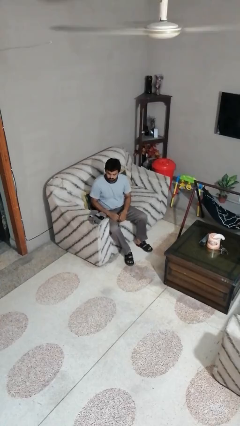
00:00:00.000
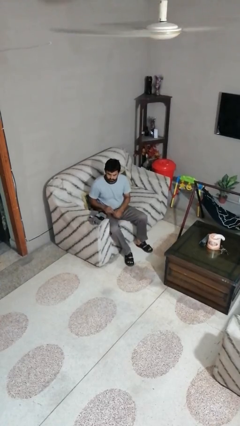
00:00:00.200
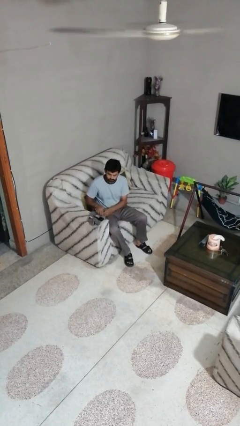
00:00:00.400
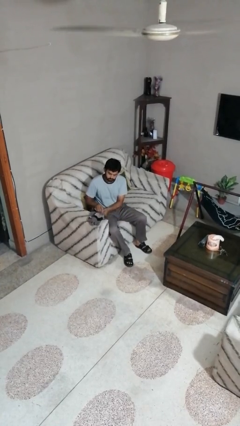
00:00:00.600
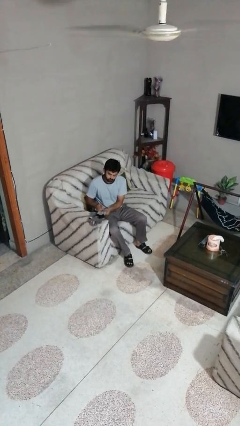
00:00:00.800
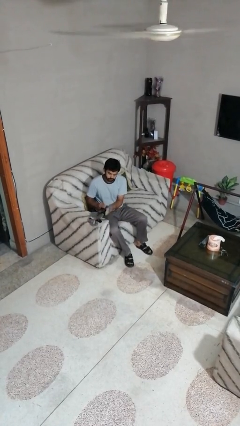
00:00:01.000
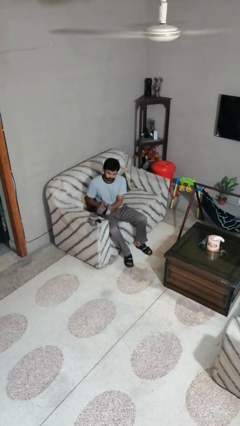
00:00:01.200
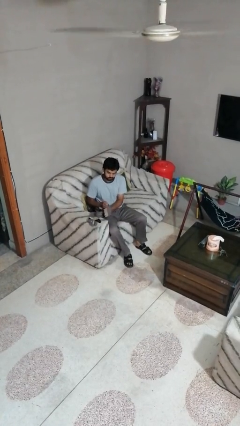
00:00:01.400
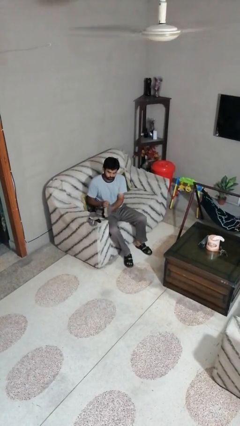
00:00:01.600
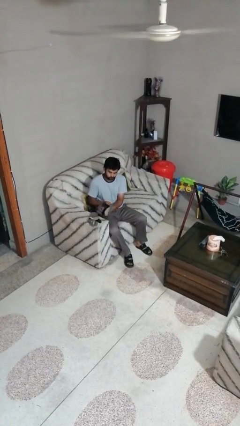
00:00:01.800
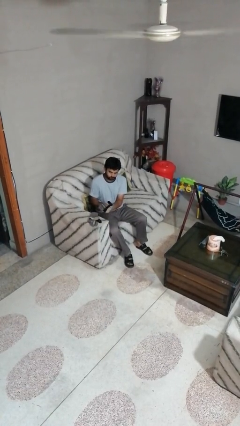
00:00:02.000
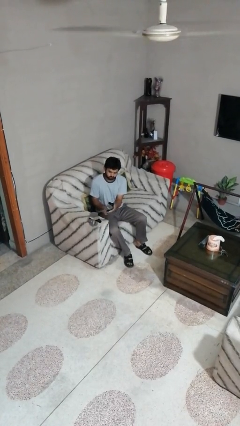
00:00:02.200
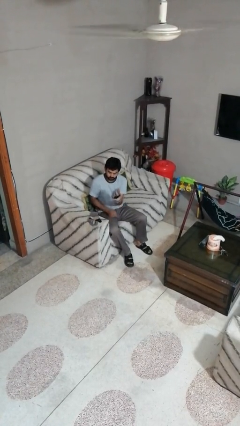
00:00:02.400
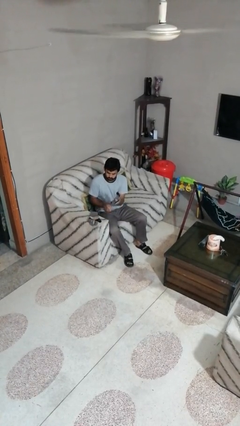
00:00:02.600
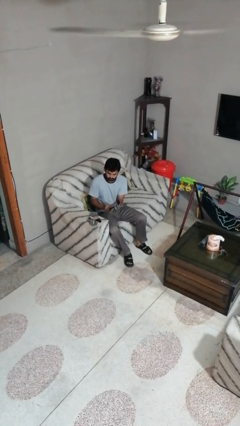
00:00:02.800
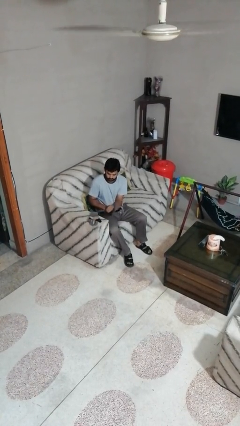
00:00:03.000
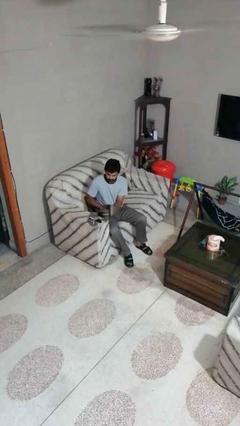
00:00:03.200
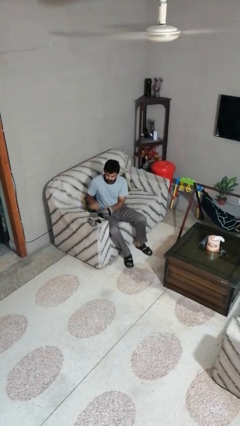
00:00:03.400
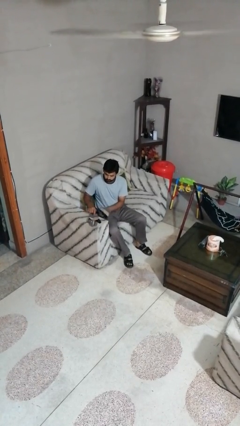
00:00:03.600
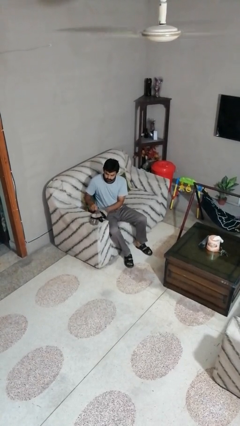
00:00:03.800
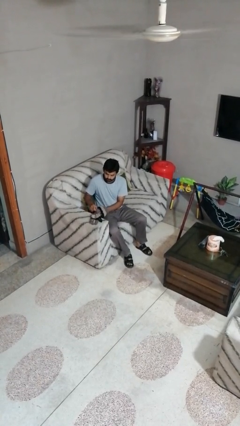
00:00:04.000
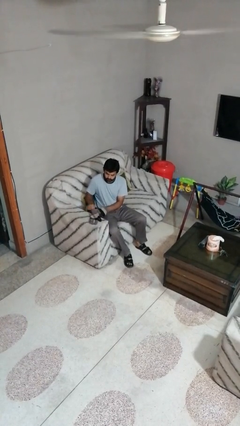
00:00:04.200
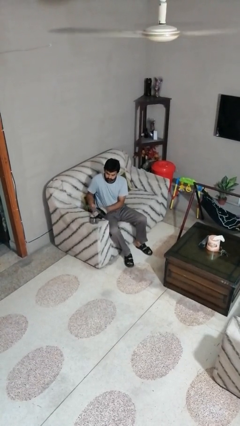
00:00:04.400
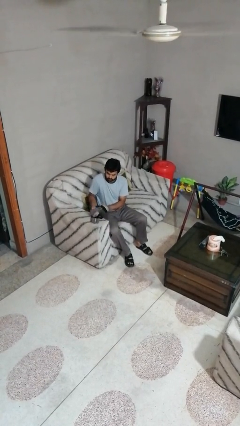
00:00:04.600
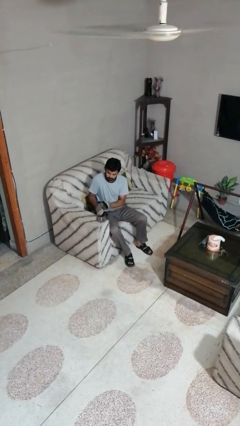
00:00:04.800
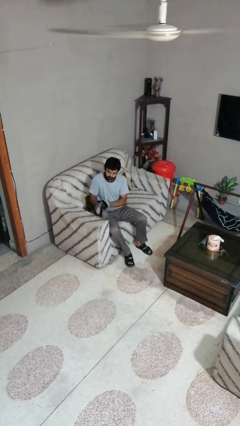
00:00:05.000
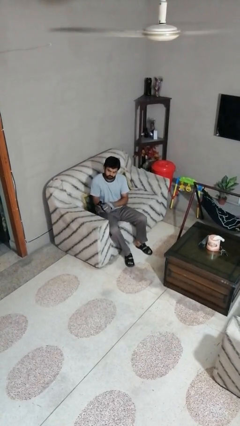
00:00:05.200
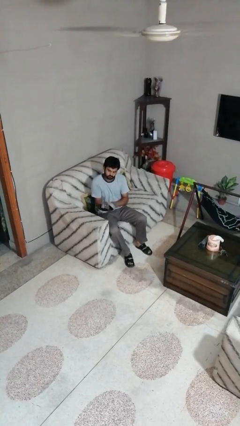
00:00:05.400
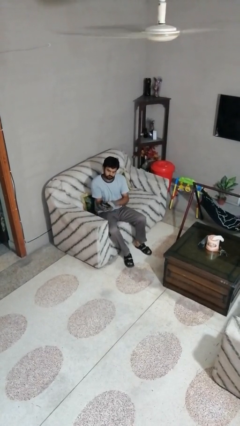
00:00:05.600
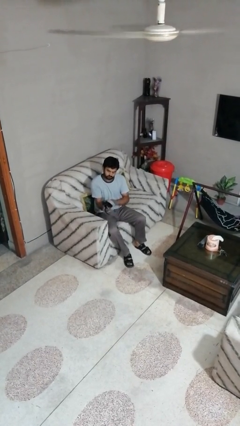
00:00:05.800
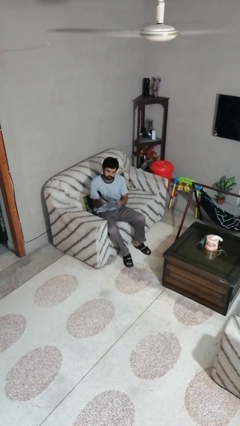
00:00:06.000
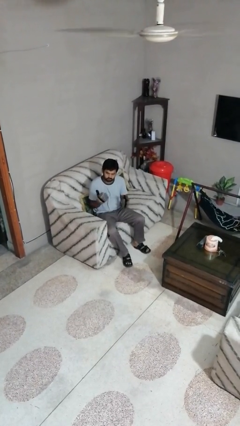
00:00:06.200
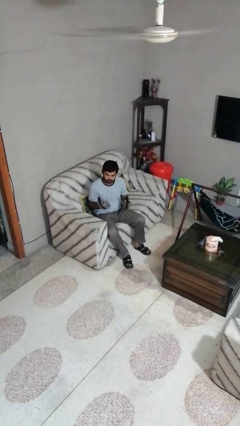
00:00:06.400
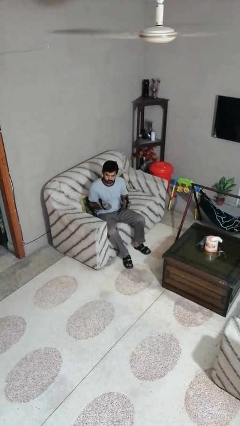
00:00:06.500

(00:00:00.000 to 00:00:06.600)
person puts on gloves

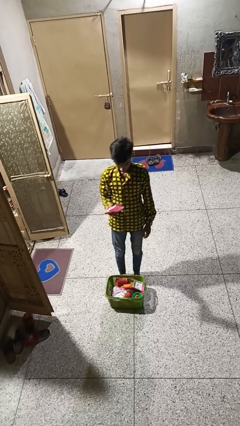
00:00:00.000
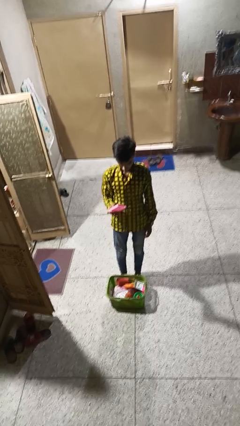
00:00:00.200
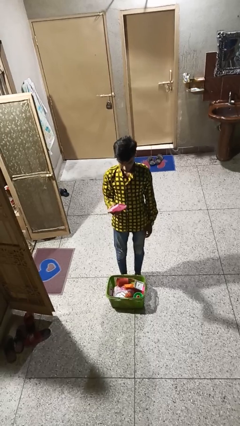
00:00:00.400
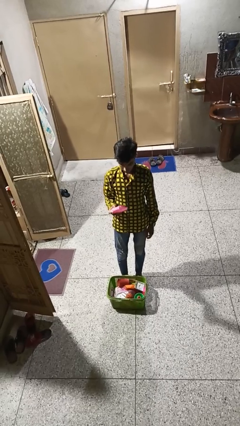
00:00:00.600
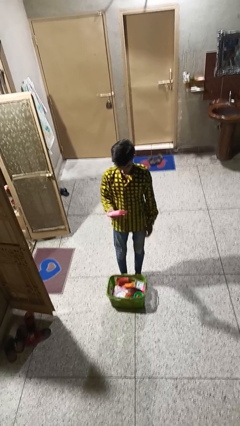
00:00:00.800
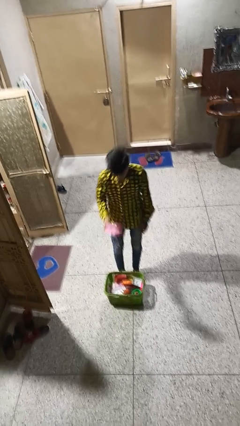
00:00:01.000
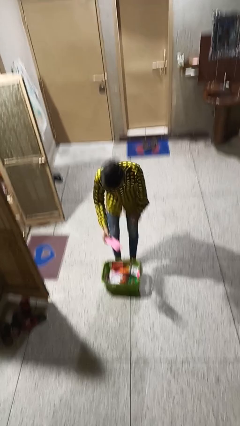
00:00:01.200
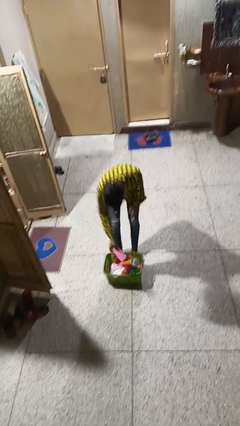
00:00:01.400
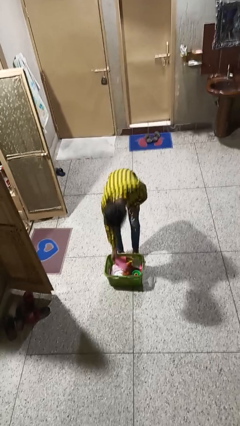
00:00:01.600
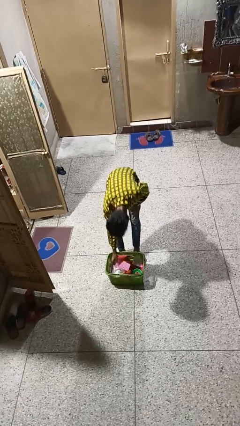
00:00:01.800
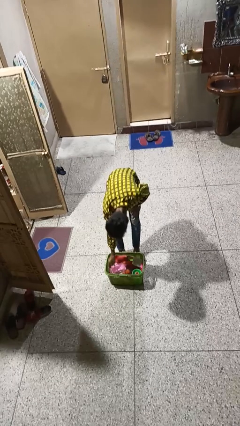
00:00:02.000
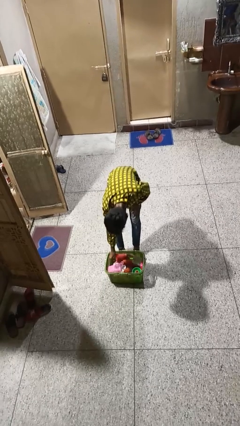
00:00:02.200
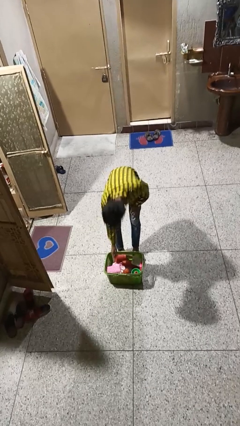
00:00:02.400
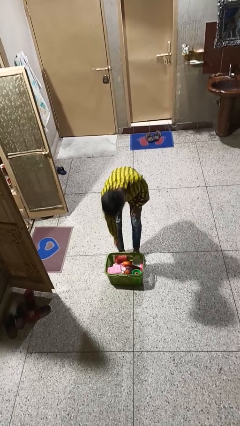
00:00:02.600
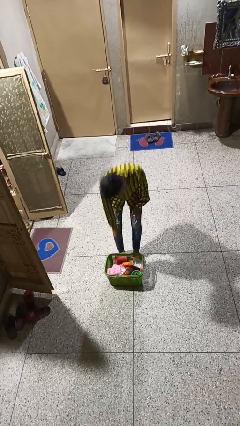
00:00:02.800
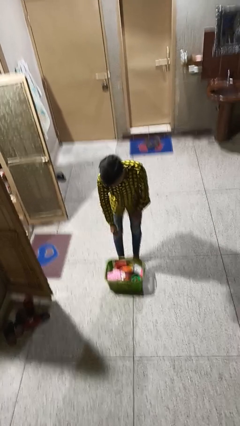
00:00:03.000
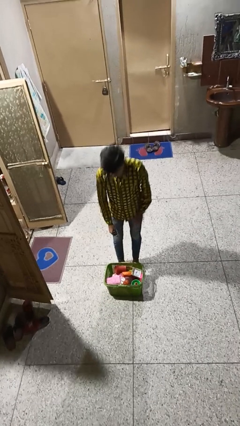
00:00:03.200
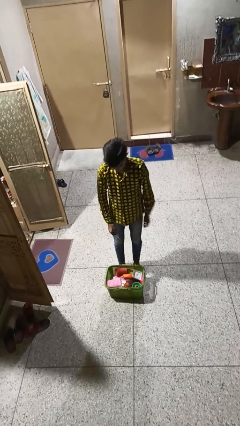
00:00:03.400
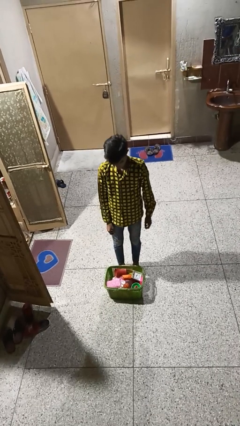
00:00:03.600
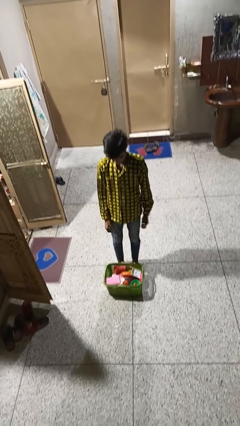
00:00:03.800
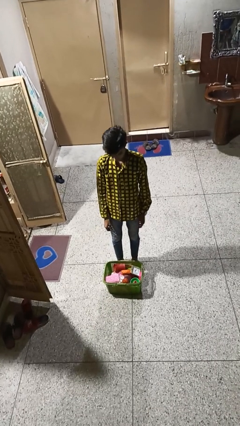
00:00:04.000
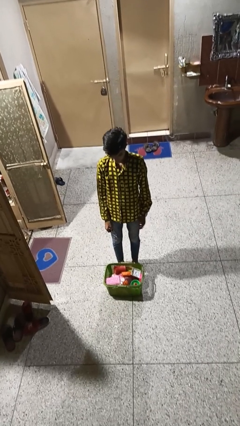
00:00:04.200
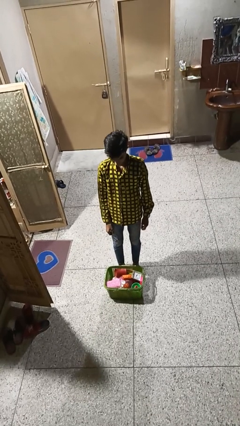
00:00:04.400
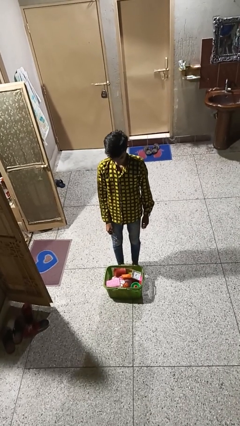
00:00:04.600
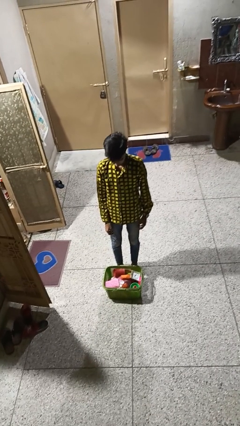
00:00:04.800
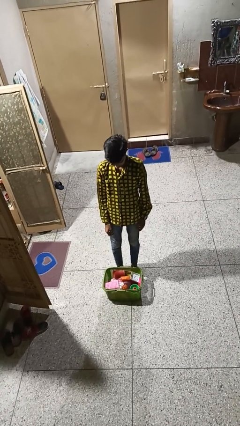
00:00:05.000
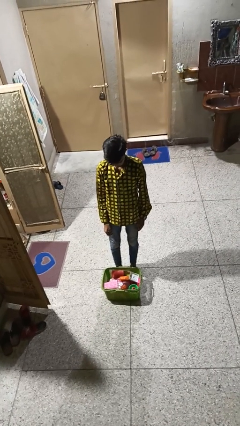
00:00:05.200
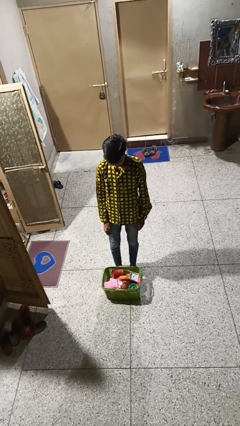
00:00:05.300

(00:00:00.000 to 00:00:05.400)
person takes object from basket

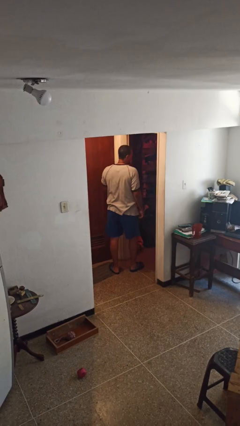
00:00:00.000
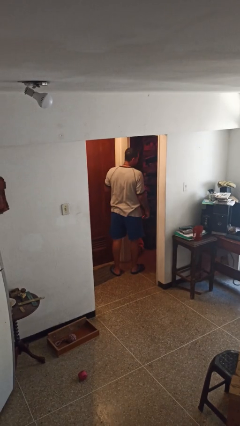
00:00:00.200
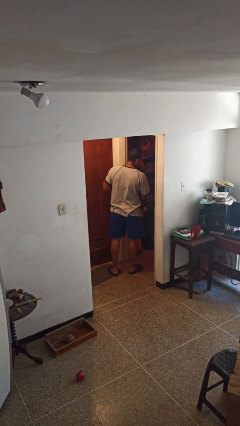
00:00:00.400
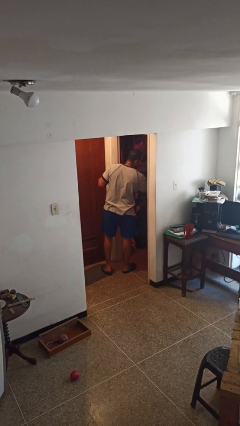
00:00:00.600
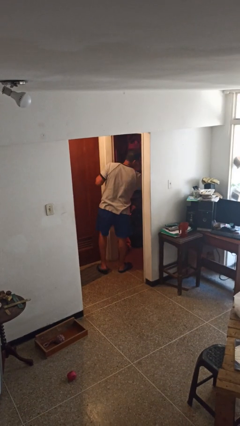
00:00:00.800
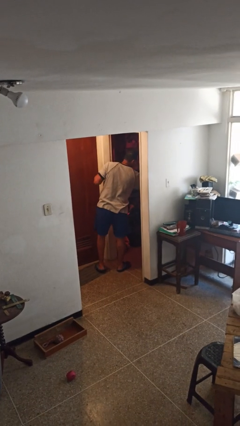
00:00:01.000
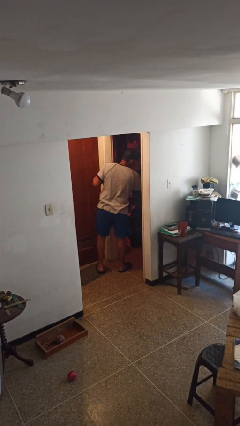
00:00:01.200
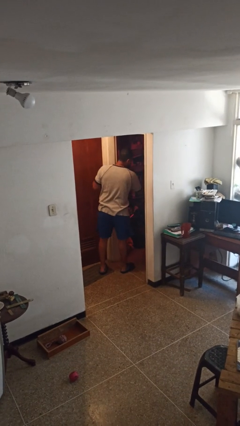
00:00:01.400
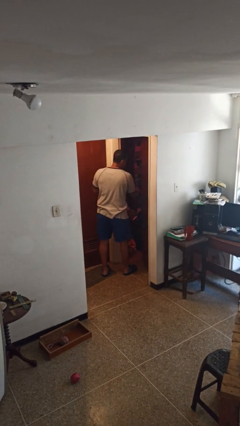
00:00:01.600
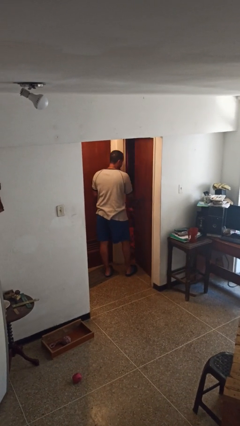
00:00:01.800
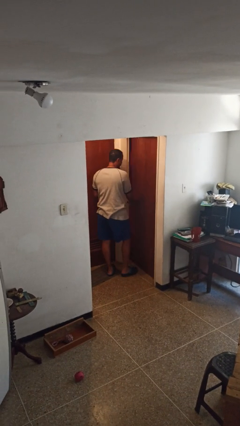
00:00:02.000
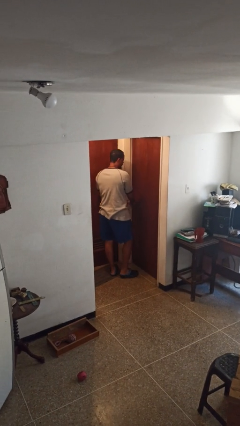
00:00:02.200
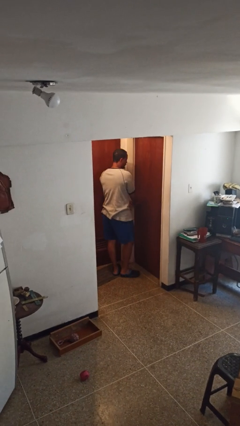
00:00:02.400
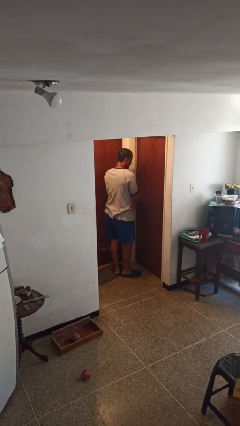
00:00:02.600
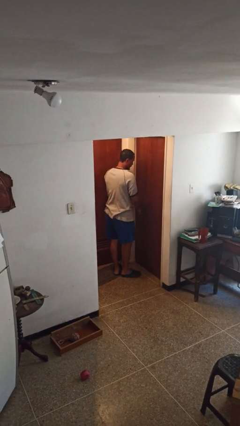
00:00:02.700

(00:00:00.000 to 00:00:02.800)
person closes facility door

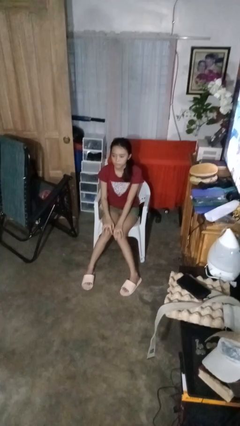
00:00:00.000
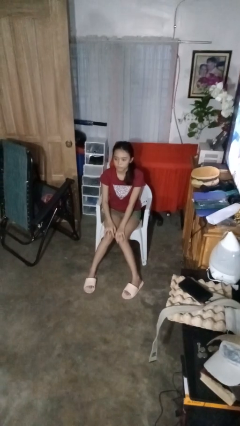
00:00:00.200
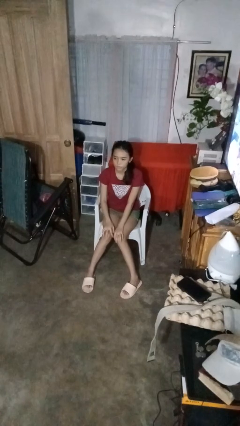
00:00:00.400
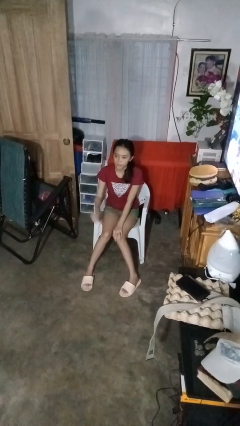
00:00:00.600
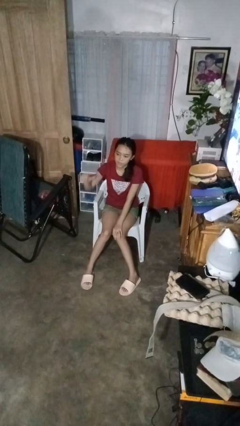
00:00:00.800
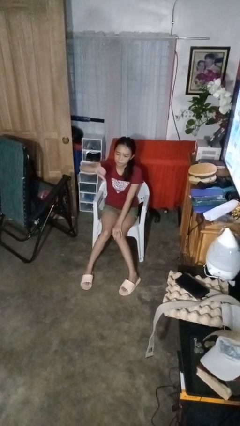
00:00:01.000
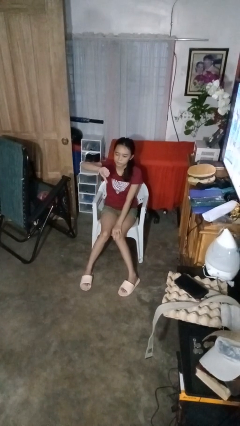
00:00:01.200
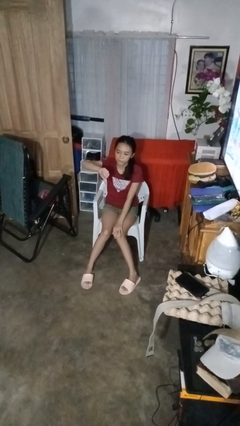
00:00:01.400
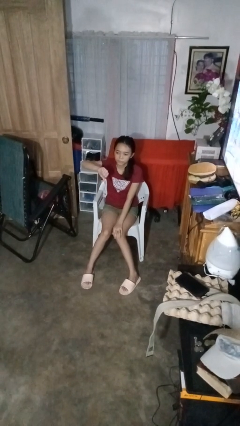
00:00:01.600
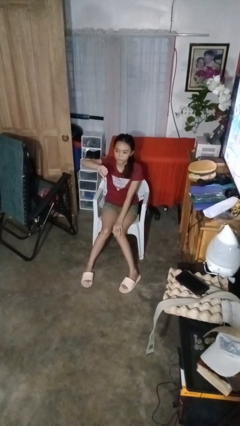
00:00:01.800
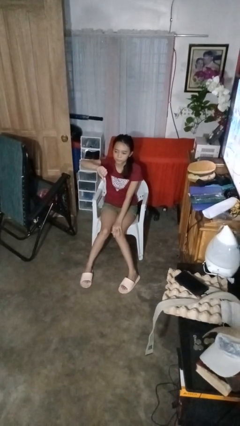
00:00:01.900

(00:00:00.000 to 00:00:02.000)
person gestures thumbs down

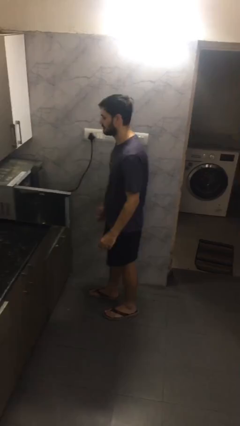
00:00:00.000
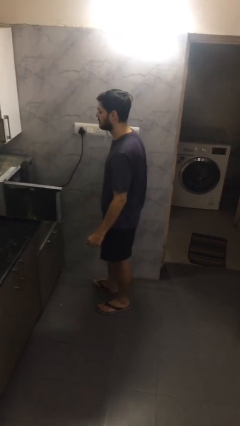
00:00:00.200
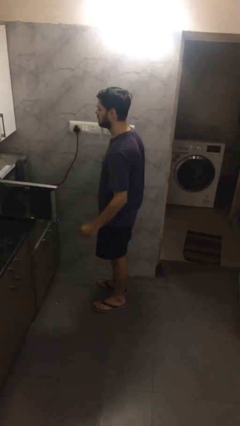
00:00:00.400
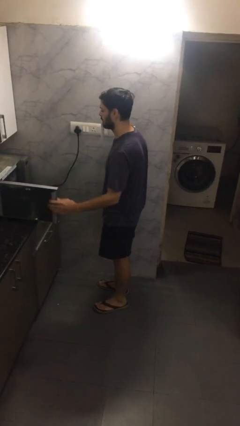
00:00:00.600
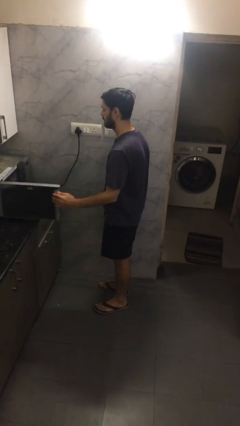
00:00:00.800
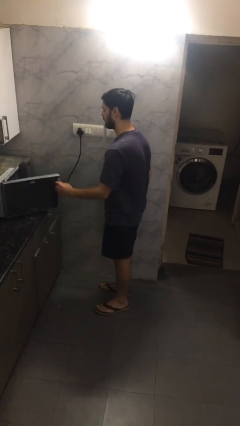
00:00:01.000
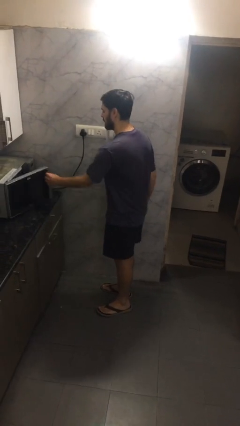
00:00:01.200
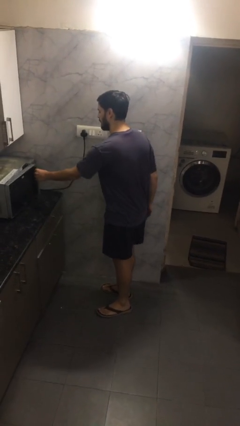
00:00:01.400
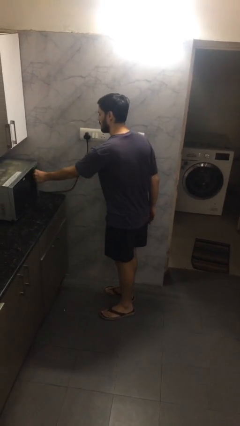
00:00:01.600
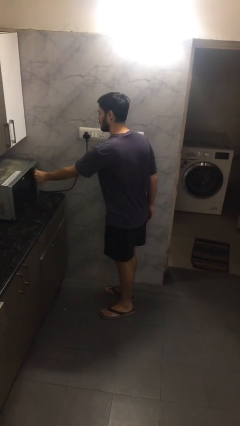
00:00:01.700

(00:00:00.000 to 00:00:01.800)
person closes microwave
